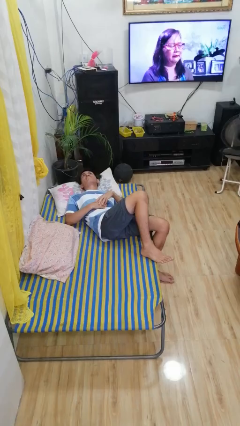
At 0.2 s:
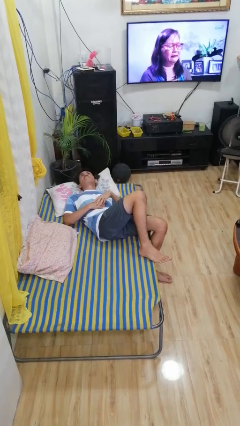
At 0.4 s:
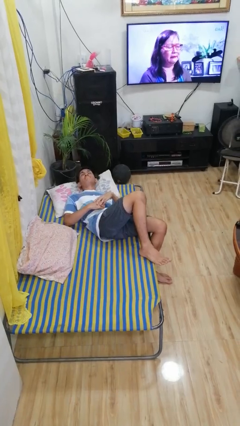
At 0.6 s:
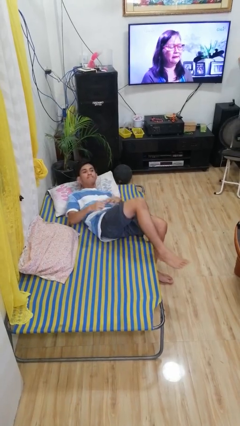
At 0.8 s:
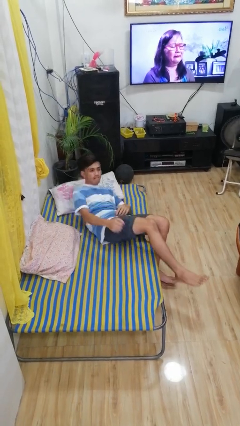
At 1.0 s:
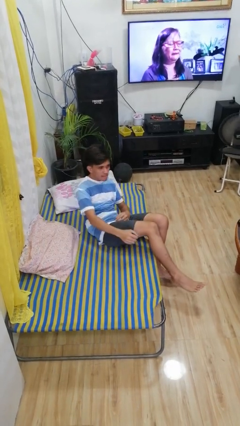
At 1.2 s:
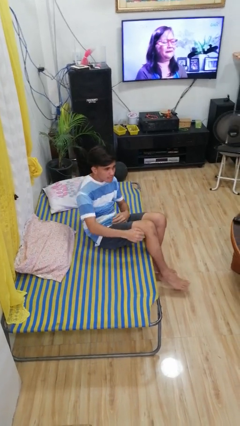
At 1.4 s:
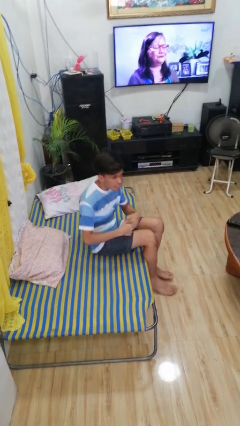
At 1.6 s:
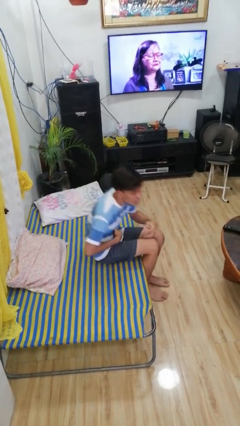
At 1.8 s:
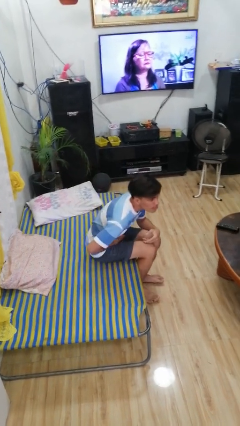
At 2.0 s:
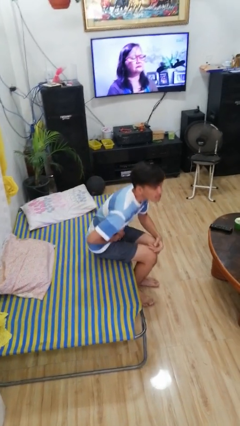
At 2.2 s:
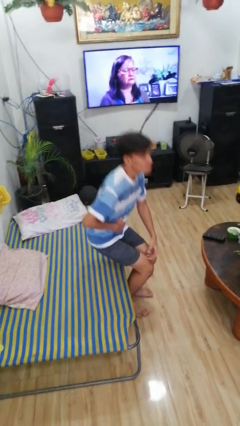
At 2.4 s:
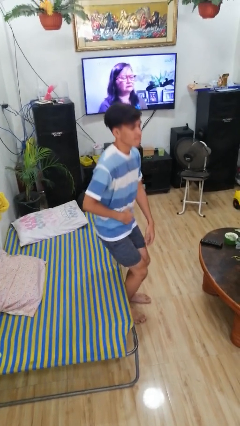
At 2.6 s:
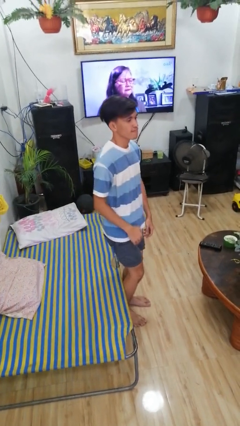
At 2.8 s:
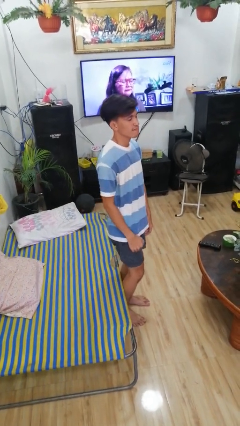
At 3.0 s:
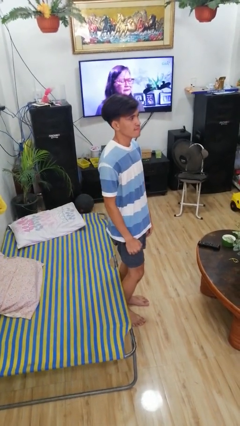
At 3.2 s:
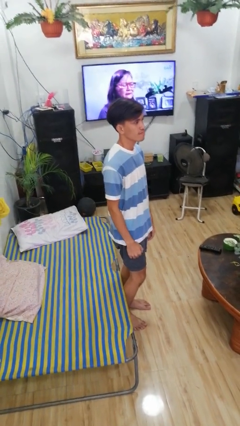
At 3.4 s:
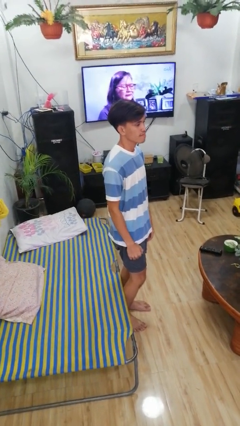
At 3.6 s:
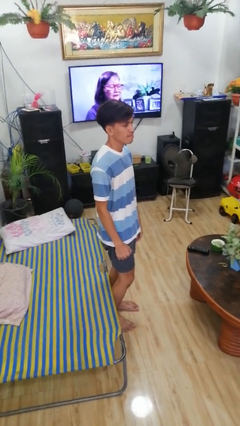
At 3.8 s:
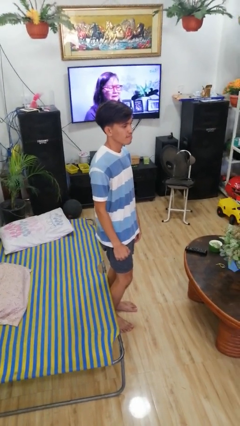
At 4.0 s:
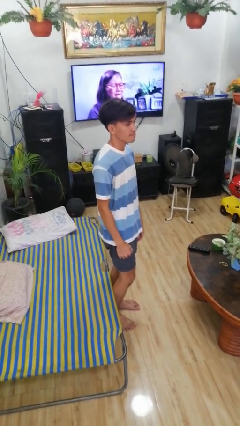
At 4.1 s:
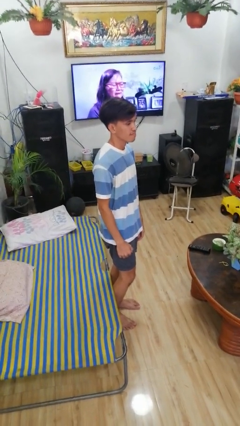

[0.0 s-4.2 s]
person stands up

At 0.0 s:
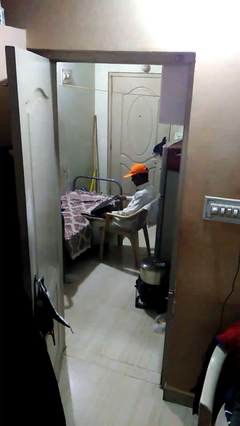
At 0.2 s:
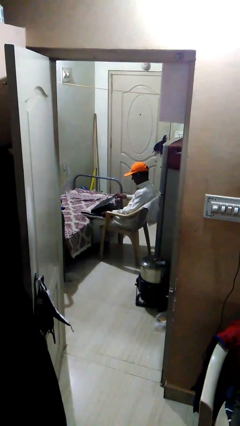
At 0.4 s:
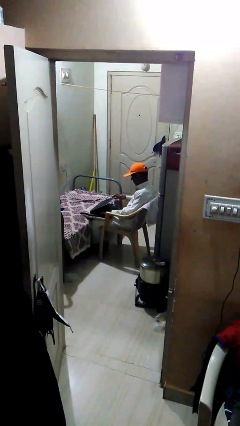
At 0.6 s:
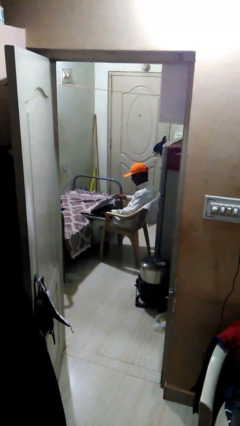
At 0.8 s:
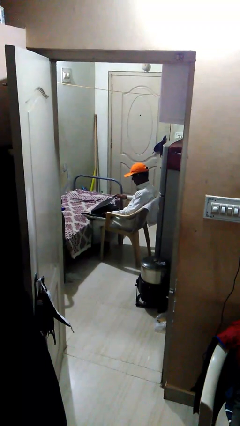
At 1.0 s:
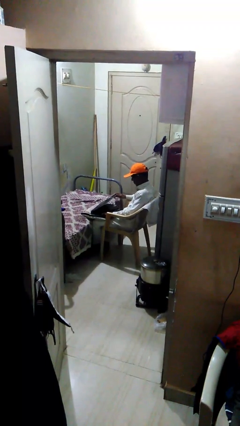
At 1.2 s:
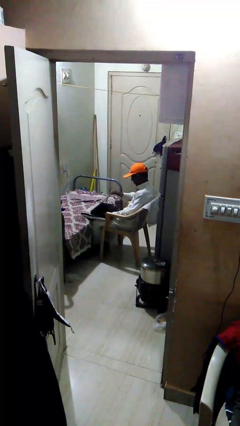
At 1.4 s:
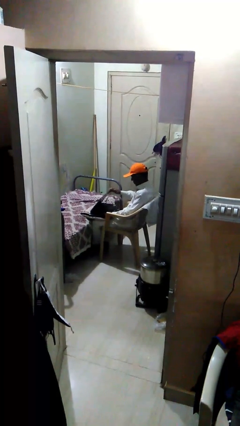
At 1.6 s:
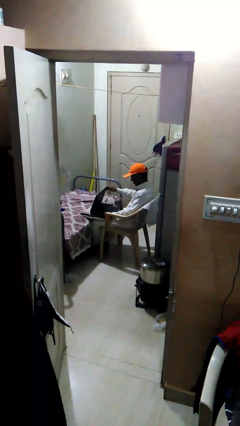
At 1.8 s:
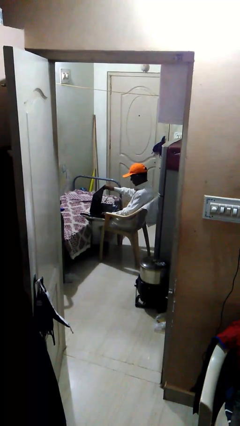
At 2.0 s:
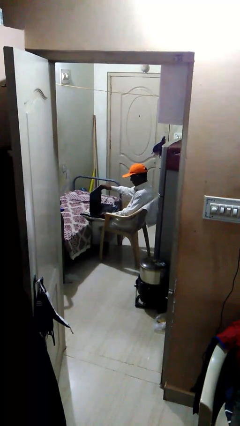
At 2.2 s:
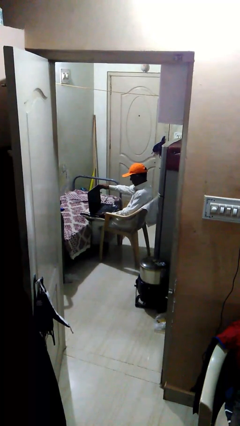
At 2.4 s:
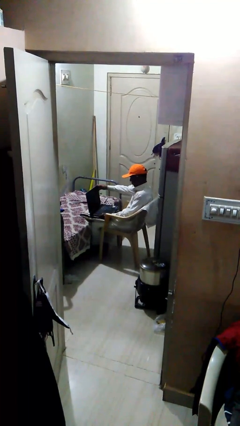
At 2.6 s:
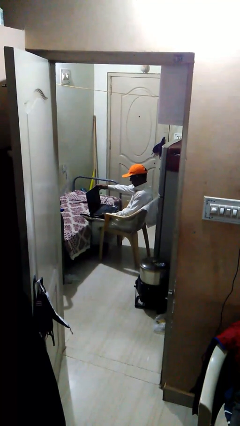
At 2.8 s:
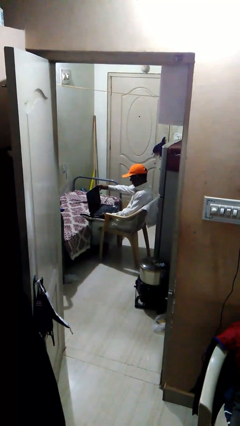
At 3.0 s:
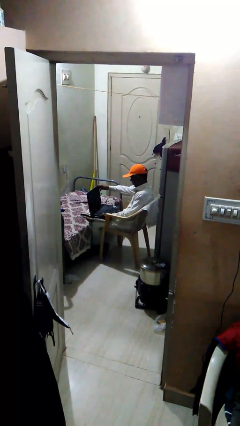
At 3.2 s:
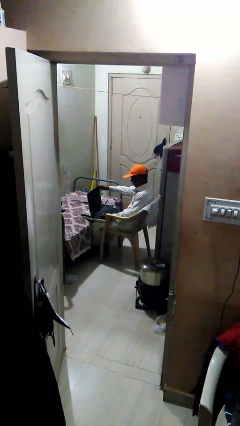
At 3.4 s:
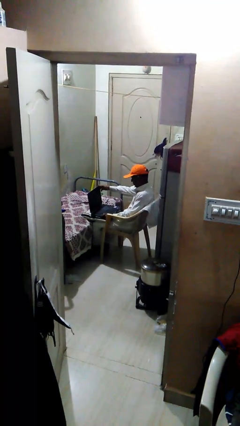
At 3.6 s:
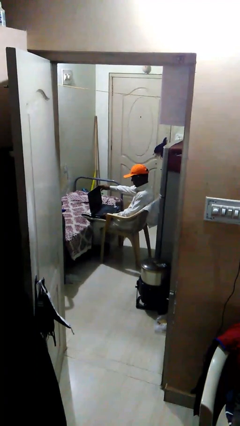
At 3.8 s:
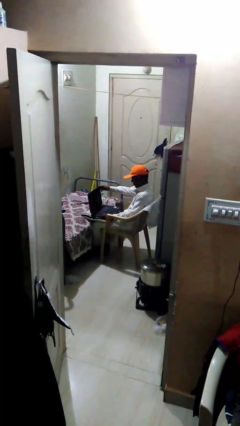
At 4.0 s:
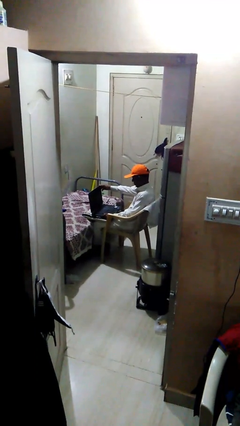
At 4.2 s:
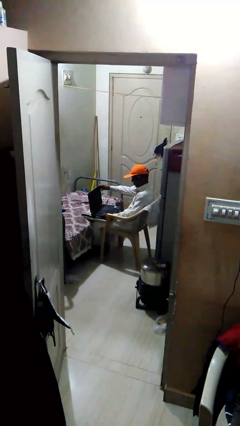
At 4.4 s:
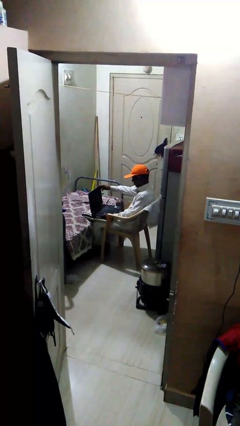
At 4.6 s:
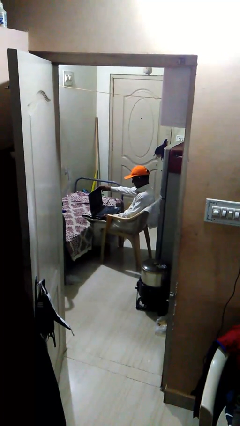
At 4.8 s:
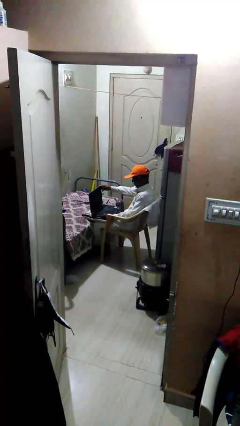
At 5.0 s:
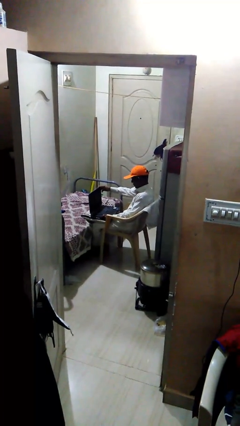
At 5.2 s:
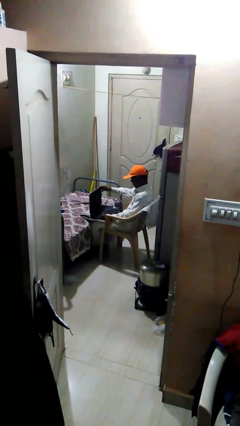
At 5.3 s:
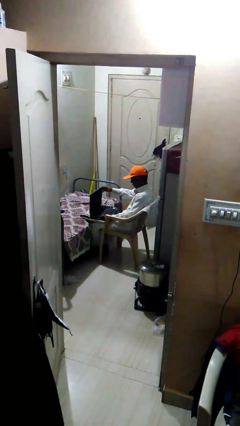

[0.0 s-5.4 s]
person interacts with laptop

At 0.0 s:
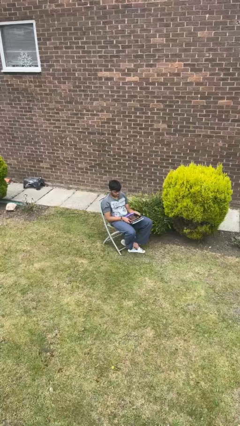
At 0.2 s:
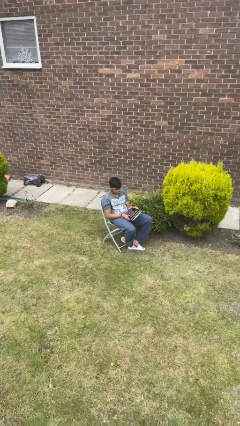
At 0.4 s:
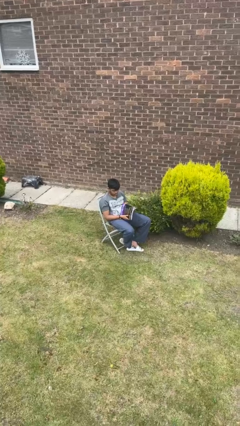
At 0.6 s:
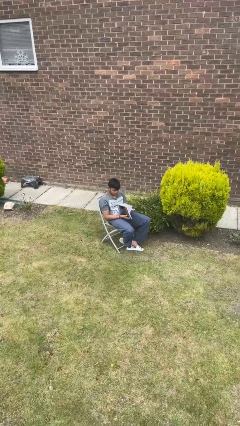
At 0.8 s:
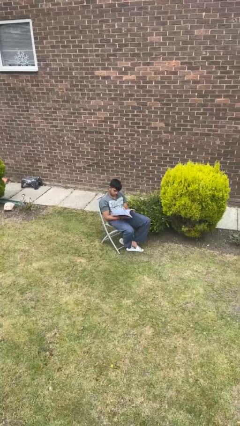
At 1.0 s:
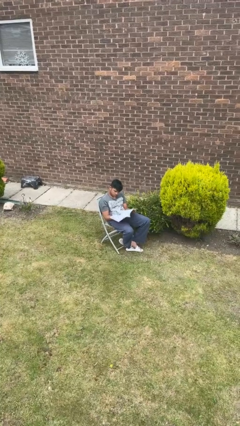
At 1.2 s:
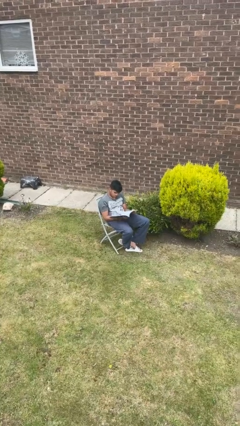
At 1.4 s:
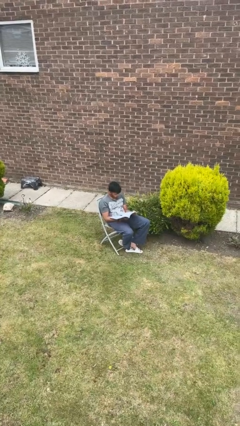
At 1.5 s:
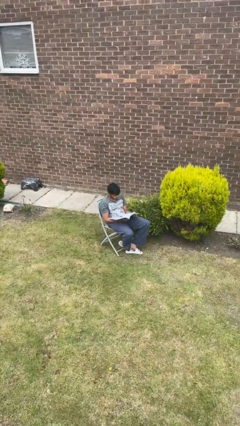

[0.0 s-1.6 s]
person reads magazine

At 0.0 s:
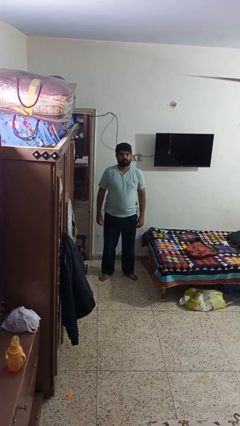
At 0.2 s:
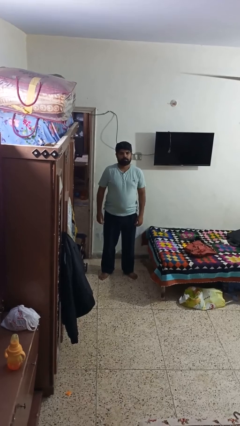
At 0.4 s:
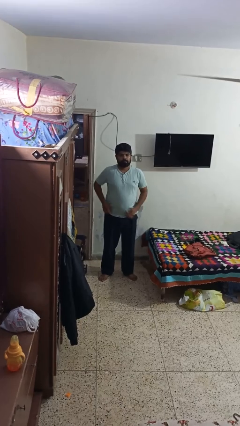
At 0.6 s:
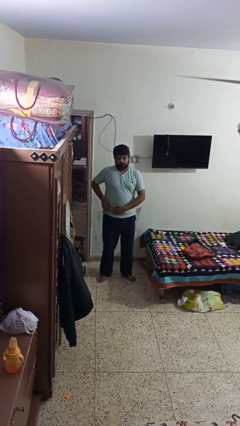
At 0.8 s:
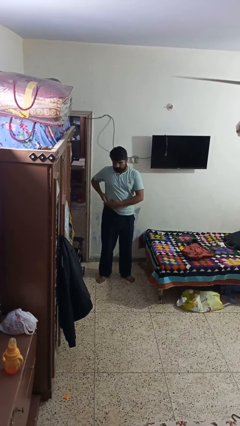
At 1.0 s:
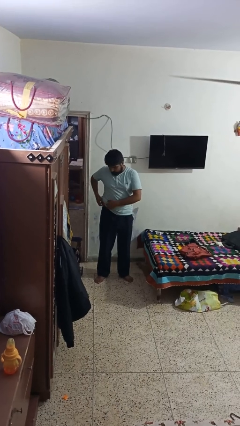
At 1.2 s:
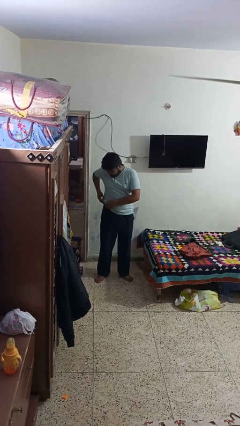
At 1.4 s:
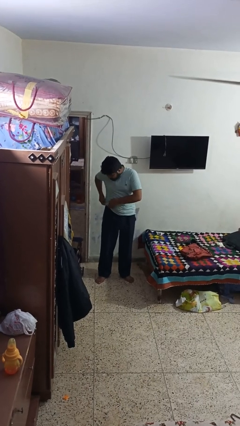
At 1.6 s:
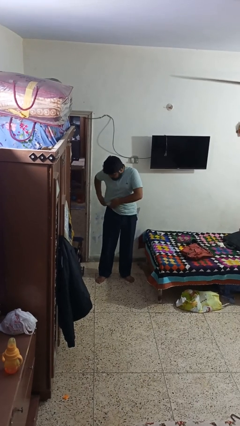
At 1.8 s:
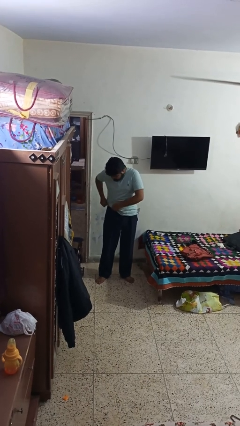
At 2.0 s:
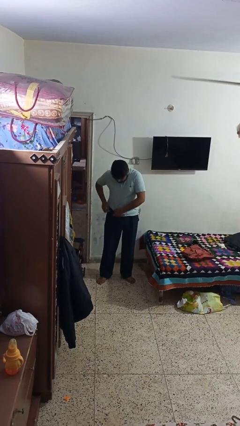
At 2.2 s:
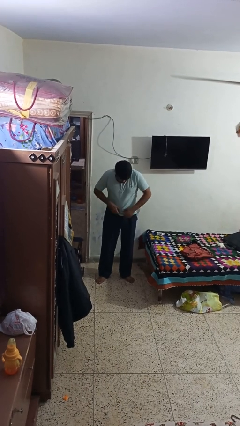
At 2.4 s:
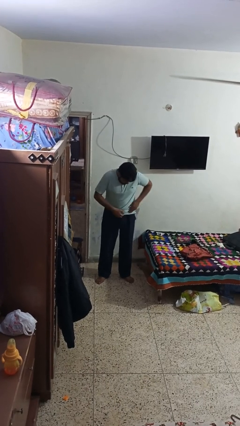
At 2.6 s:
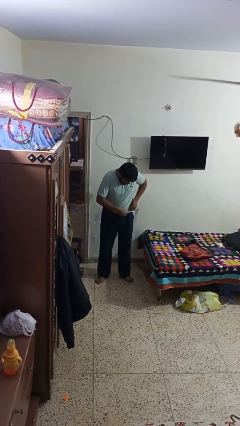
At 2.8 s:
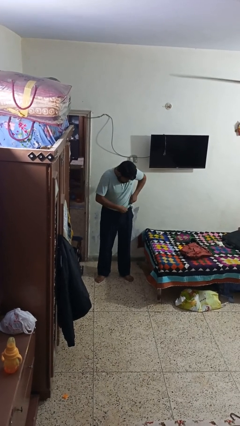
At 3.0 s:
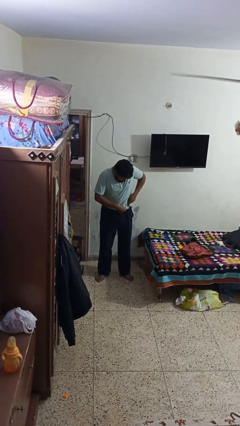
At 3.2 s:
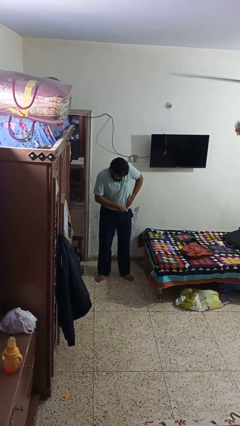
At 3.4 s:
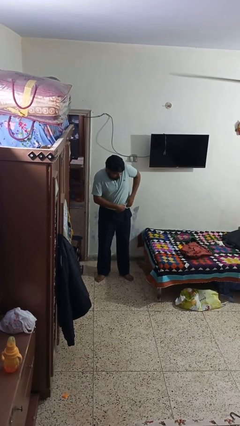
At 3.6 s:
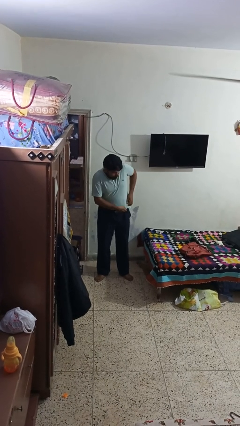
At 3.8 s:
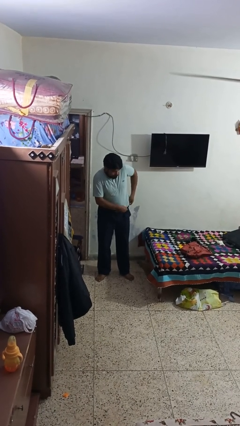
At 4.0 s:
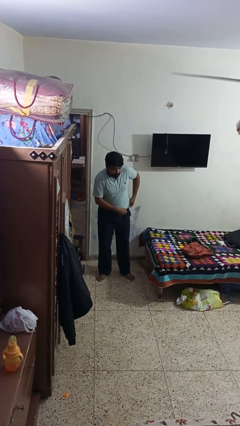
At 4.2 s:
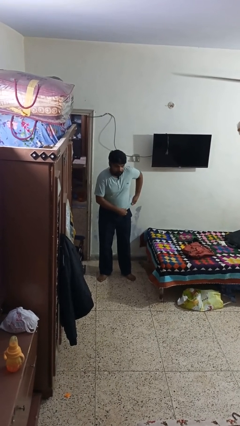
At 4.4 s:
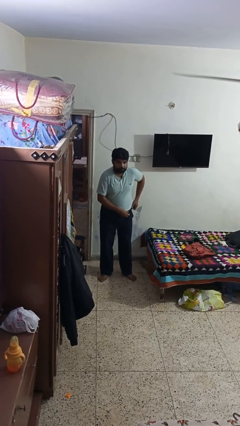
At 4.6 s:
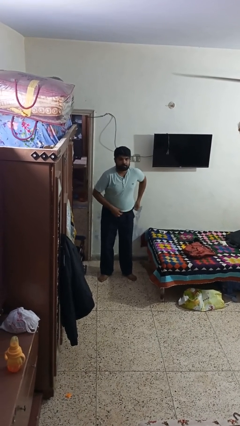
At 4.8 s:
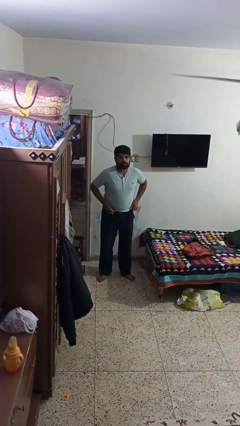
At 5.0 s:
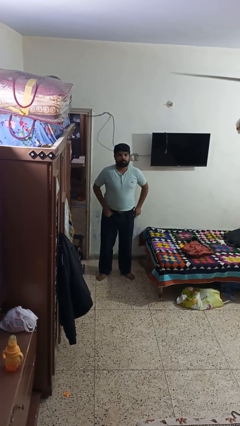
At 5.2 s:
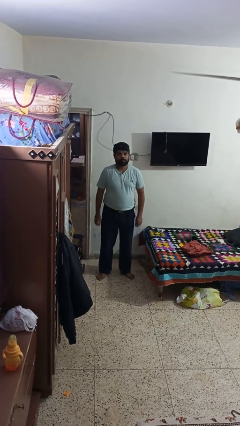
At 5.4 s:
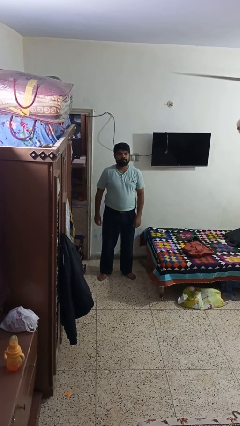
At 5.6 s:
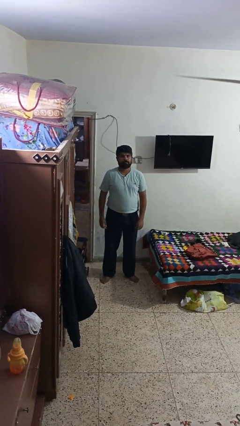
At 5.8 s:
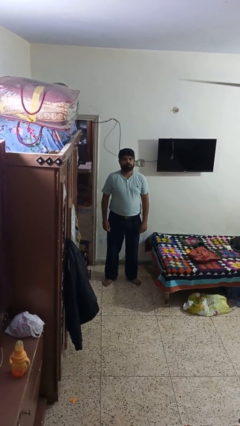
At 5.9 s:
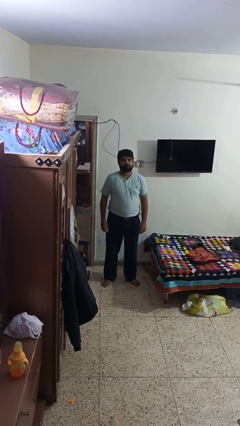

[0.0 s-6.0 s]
person tucks in shirt

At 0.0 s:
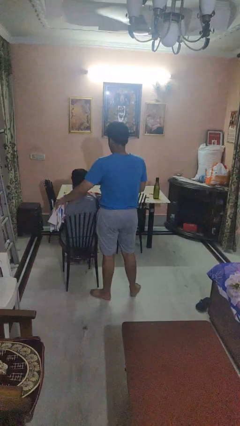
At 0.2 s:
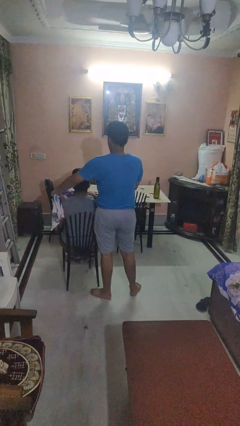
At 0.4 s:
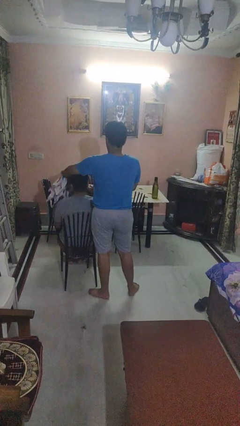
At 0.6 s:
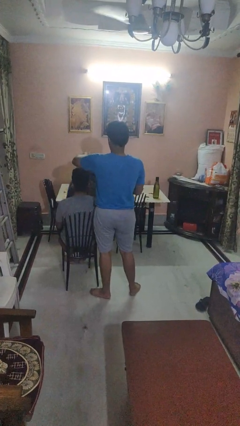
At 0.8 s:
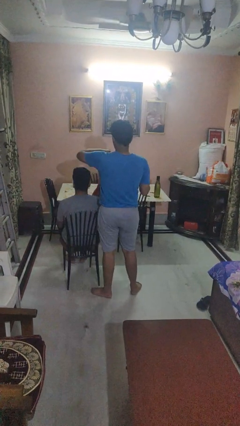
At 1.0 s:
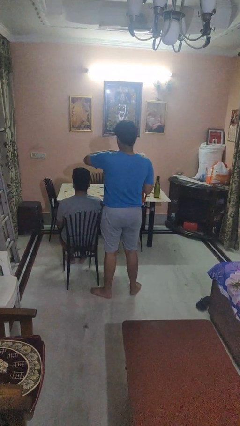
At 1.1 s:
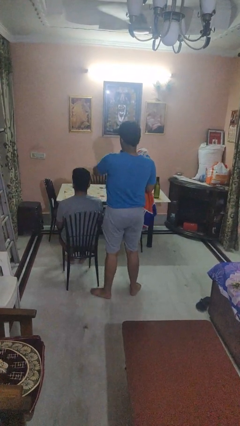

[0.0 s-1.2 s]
person uncovers friend with blanket
